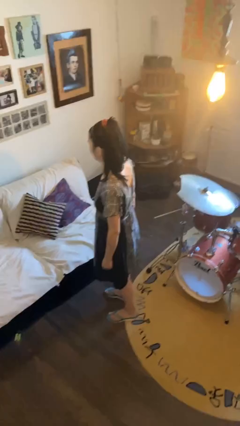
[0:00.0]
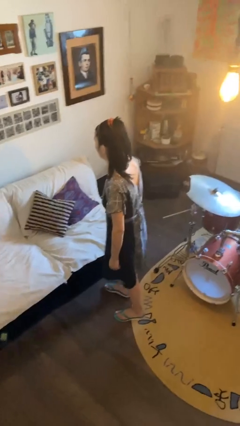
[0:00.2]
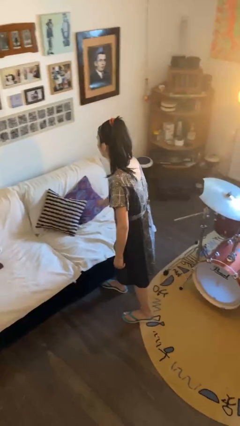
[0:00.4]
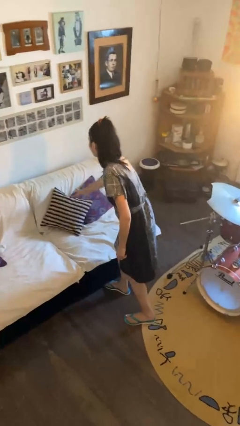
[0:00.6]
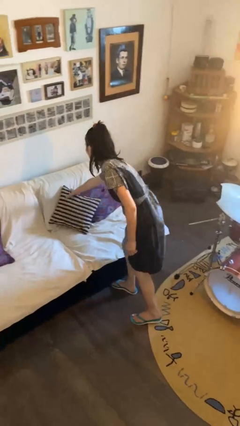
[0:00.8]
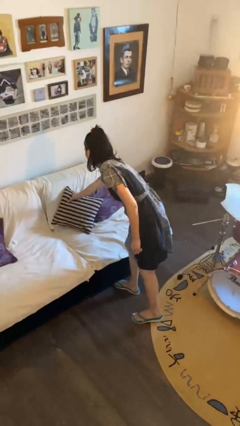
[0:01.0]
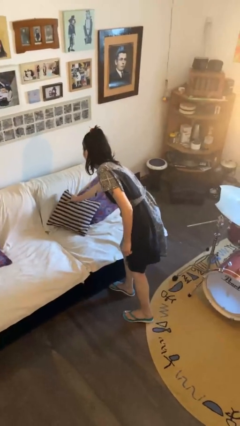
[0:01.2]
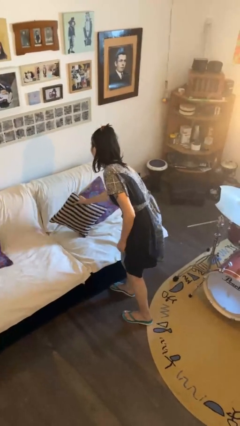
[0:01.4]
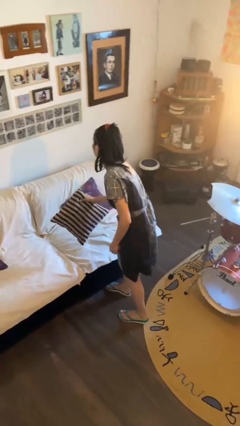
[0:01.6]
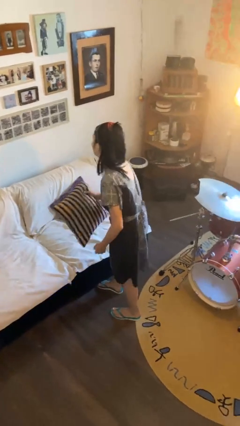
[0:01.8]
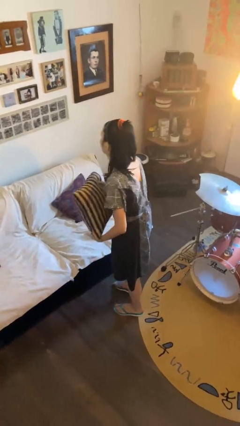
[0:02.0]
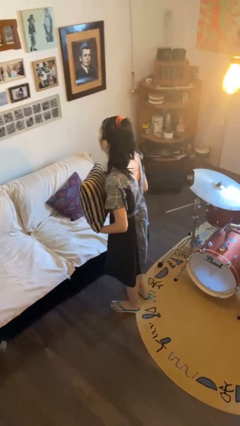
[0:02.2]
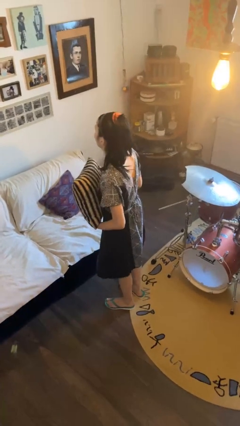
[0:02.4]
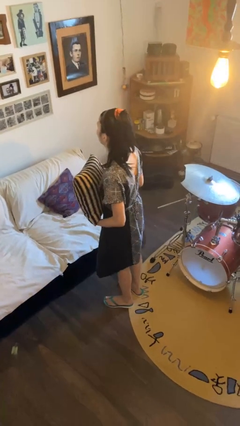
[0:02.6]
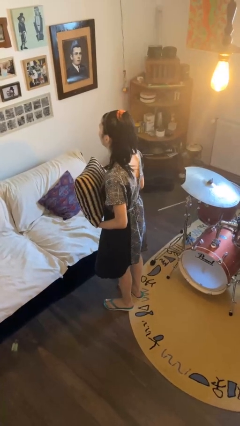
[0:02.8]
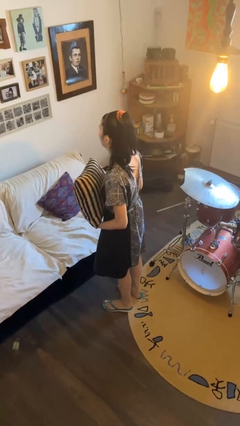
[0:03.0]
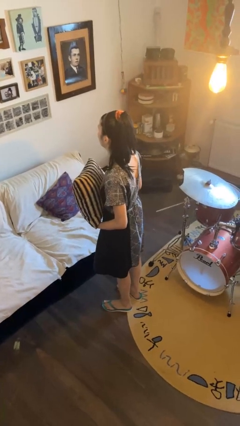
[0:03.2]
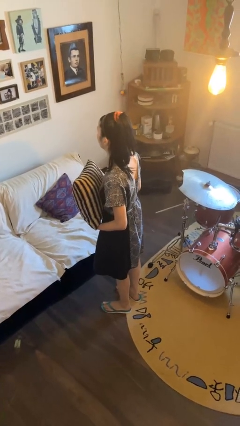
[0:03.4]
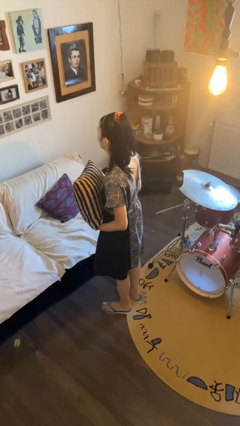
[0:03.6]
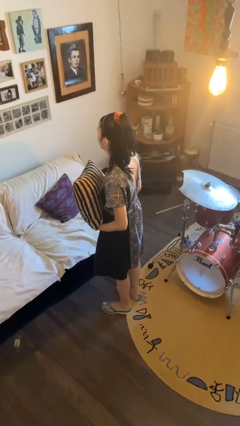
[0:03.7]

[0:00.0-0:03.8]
person picks up object from couch

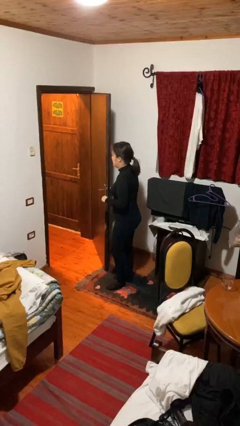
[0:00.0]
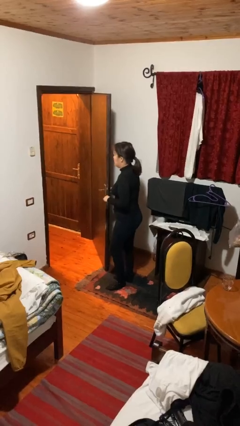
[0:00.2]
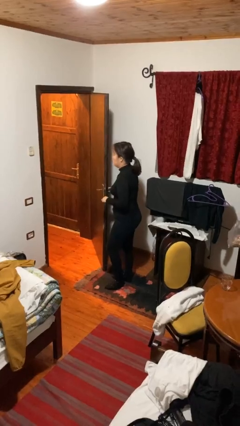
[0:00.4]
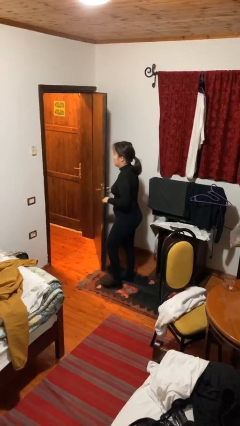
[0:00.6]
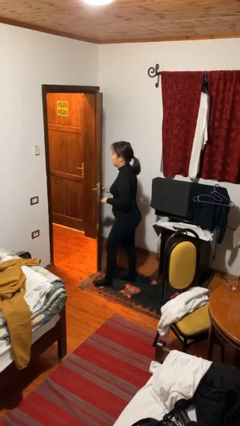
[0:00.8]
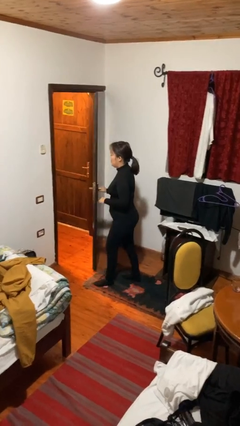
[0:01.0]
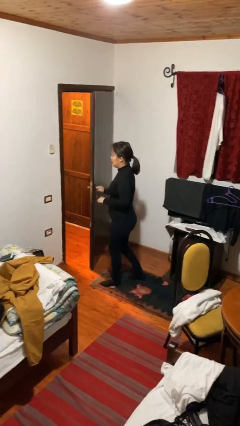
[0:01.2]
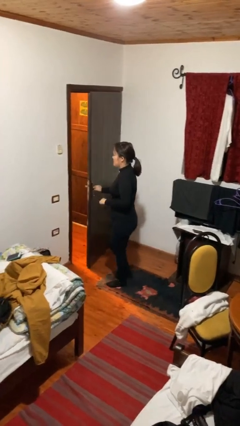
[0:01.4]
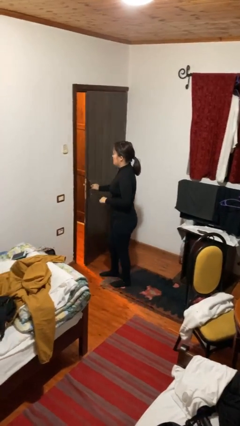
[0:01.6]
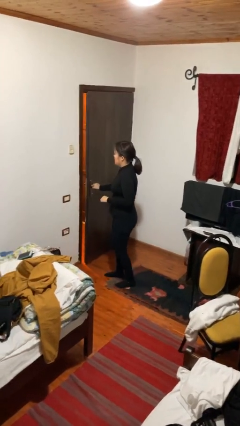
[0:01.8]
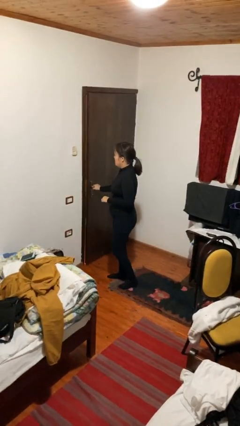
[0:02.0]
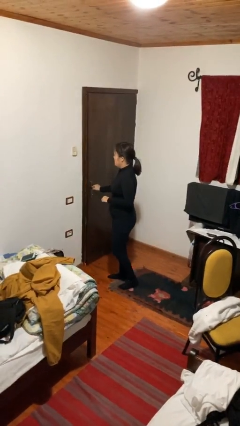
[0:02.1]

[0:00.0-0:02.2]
person closes facility door

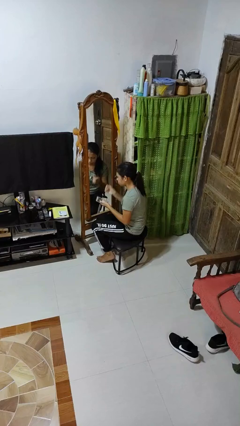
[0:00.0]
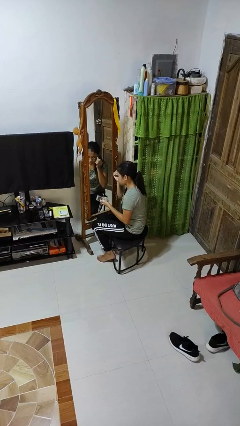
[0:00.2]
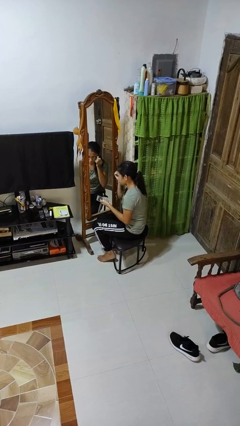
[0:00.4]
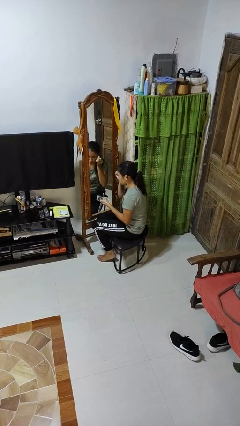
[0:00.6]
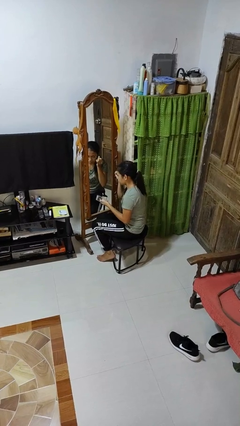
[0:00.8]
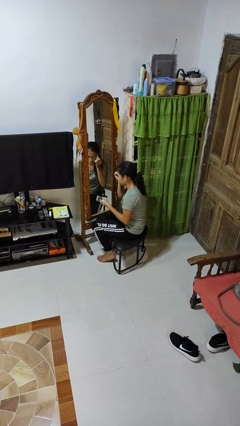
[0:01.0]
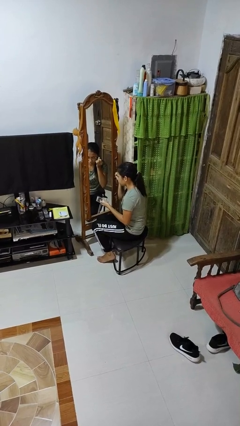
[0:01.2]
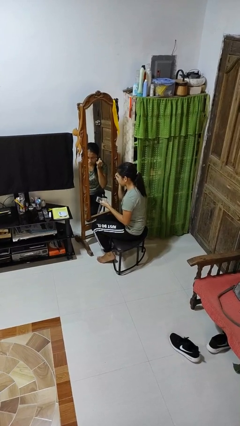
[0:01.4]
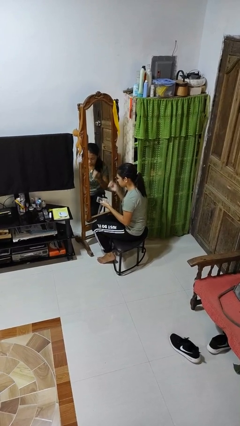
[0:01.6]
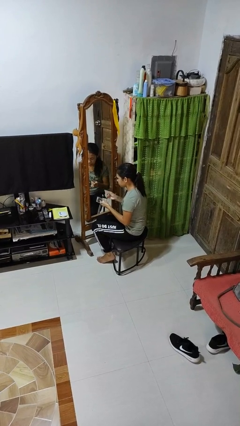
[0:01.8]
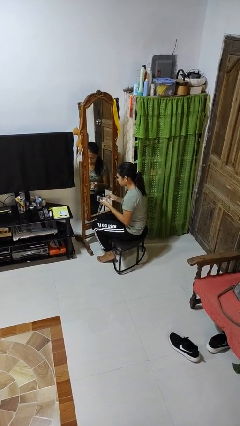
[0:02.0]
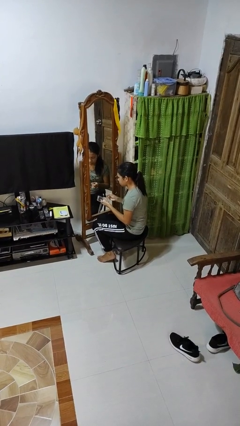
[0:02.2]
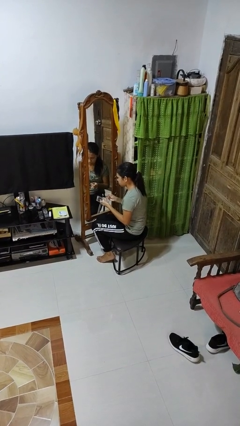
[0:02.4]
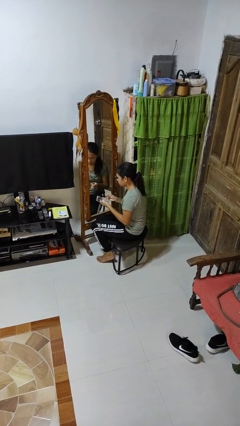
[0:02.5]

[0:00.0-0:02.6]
person applies eye makeup

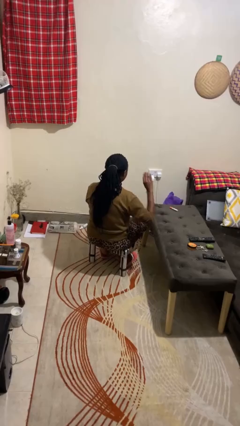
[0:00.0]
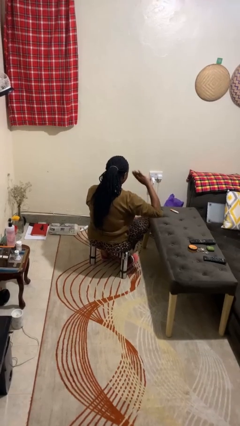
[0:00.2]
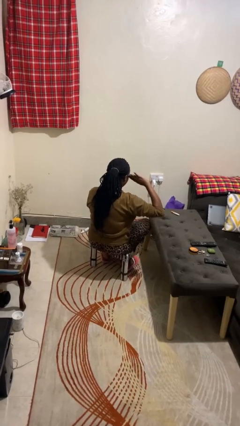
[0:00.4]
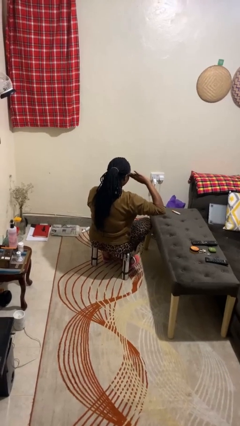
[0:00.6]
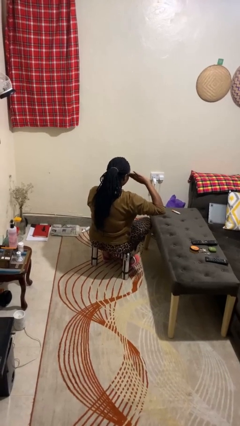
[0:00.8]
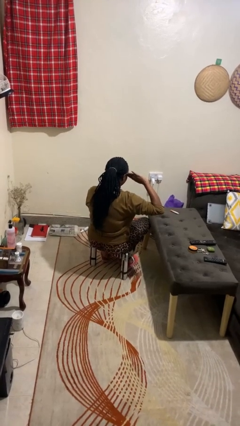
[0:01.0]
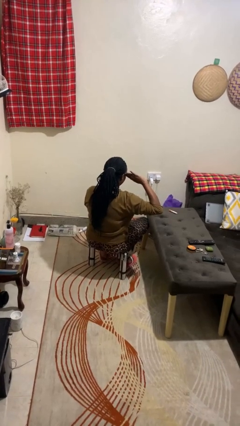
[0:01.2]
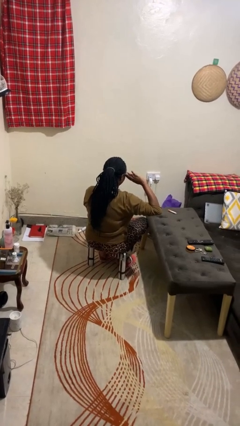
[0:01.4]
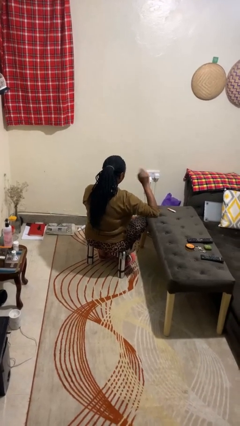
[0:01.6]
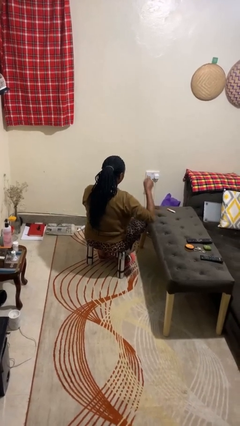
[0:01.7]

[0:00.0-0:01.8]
person salutes

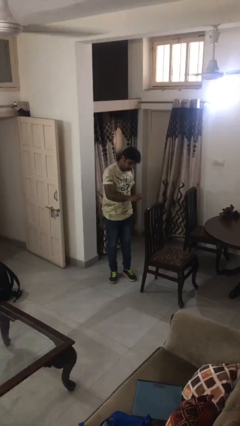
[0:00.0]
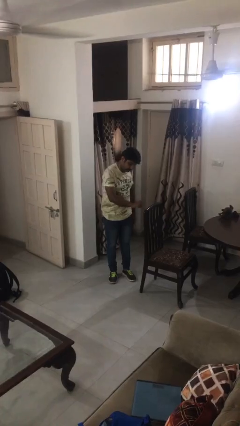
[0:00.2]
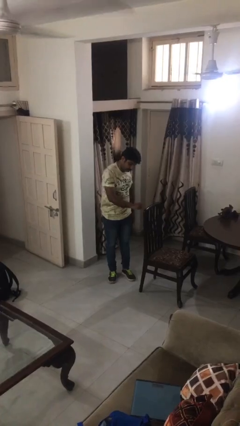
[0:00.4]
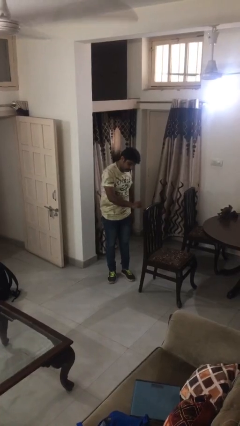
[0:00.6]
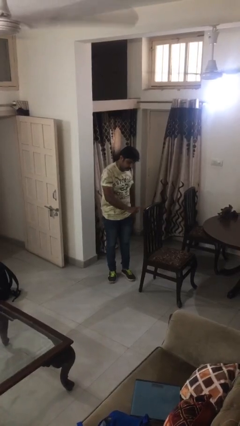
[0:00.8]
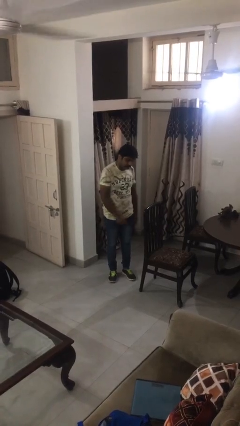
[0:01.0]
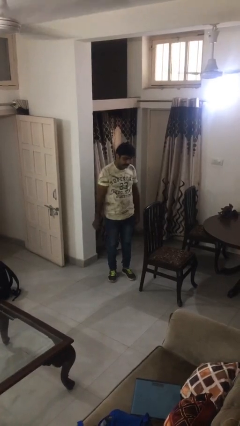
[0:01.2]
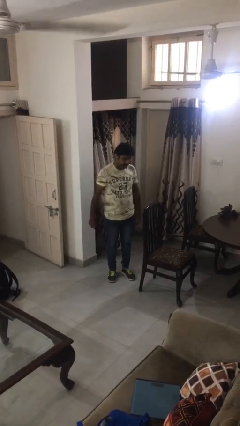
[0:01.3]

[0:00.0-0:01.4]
person taps object with finger

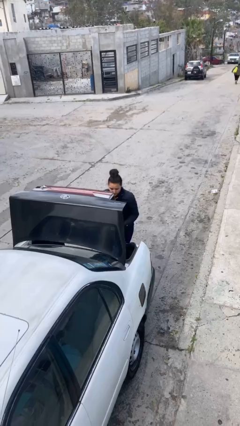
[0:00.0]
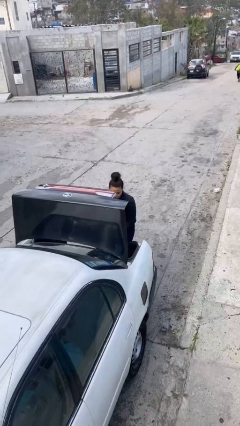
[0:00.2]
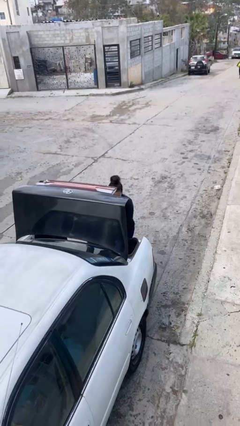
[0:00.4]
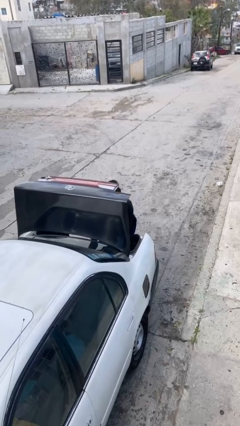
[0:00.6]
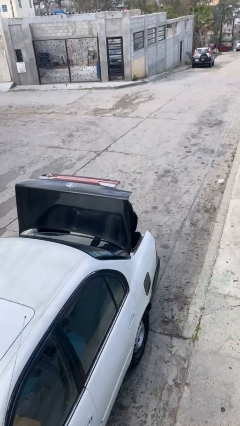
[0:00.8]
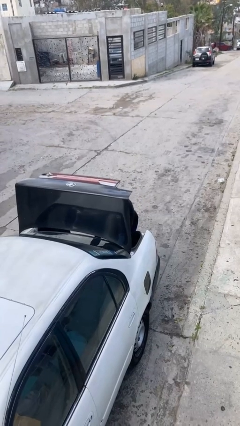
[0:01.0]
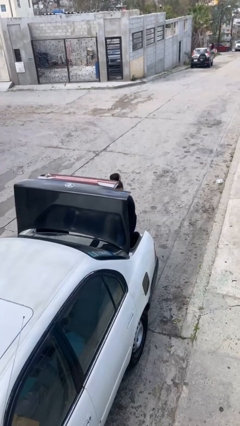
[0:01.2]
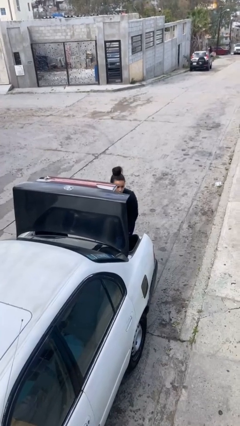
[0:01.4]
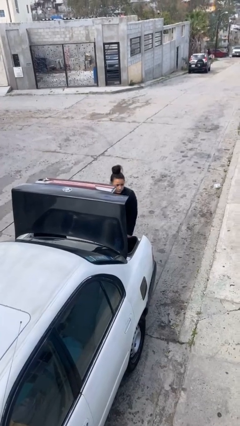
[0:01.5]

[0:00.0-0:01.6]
person loads car

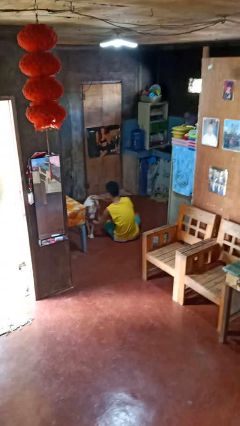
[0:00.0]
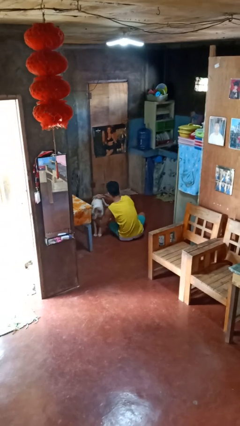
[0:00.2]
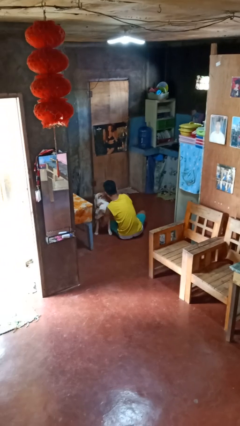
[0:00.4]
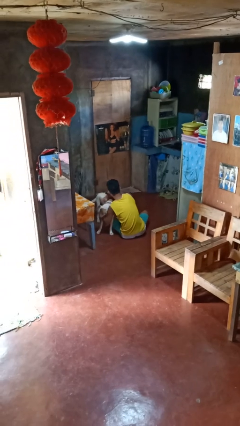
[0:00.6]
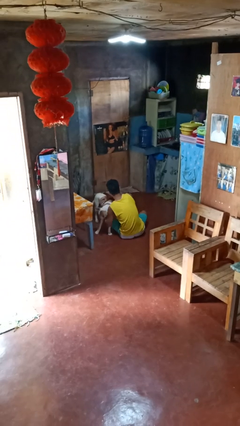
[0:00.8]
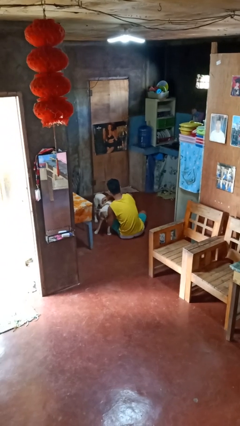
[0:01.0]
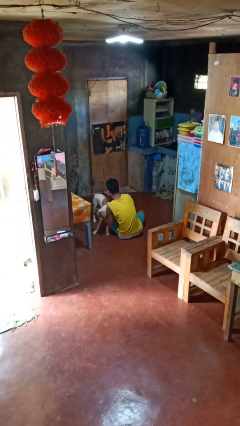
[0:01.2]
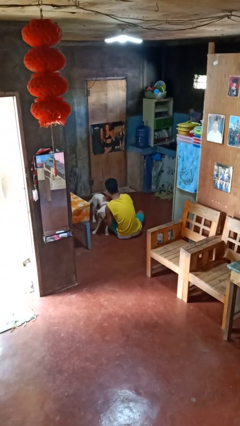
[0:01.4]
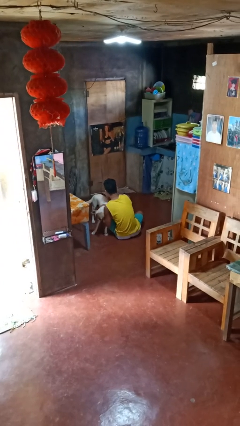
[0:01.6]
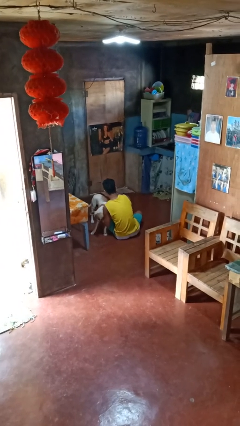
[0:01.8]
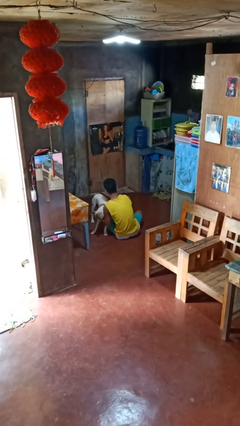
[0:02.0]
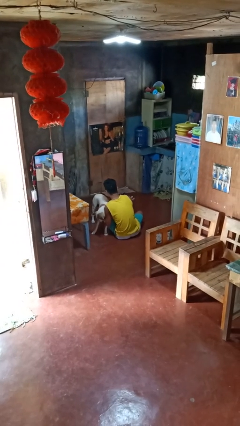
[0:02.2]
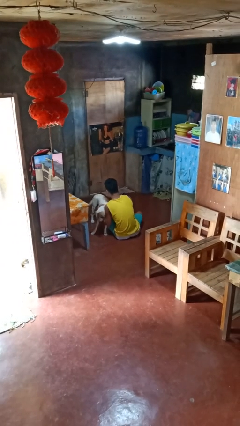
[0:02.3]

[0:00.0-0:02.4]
person hugs dog

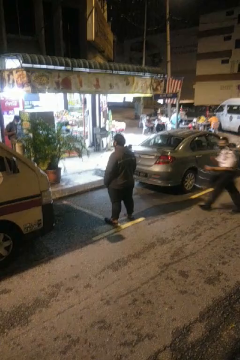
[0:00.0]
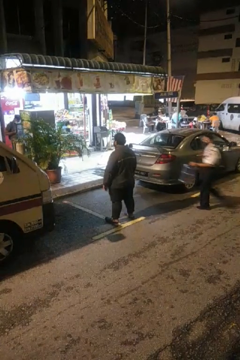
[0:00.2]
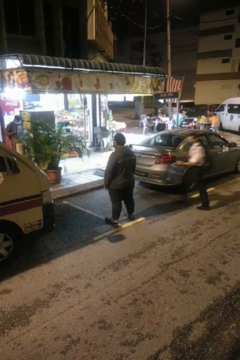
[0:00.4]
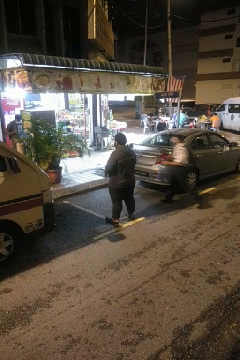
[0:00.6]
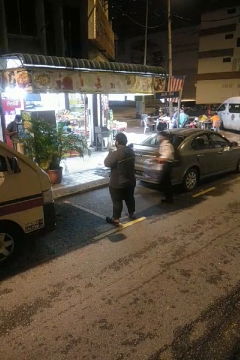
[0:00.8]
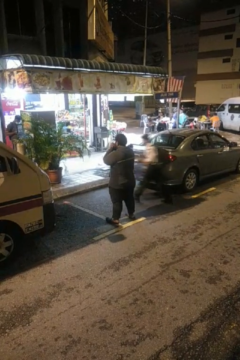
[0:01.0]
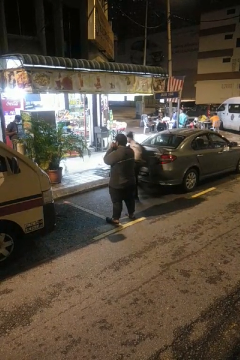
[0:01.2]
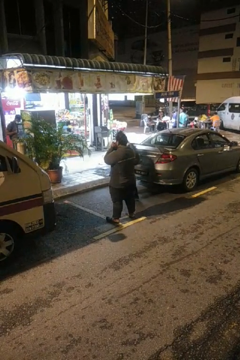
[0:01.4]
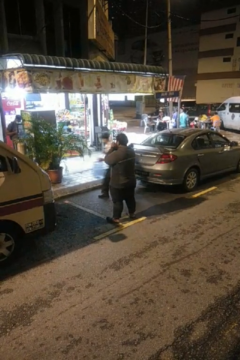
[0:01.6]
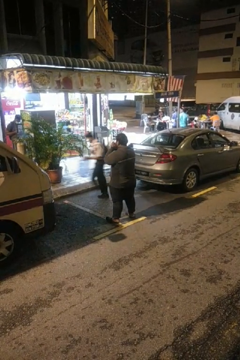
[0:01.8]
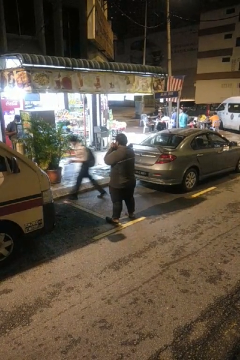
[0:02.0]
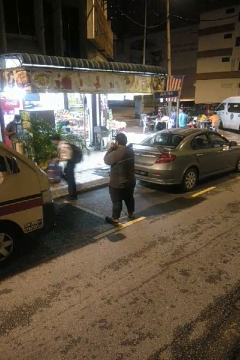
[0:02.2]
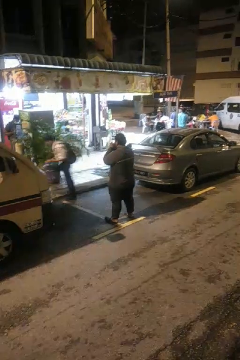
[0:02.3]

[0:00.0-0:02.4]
person blows into hands
